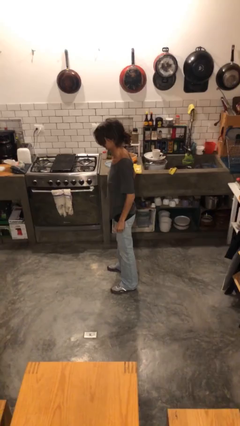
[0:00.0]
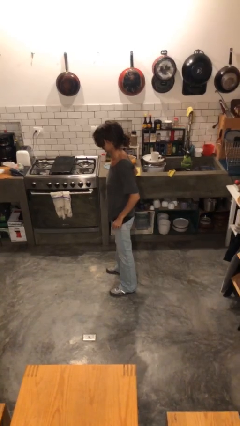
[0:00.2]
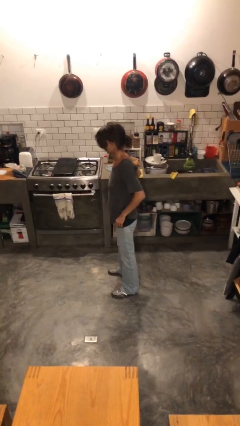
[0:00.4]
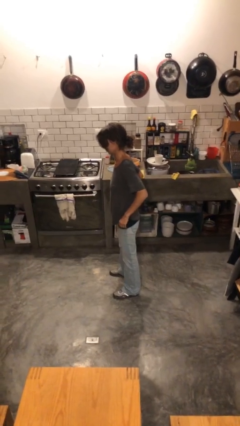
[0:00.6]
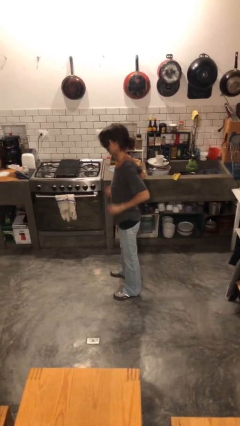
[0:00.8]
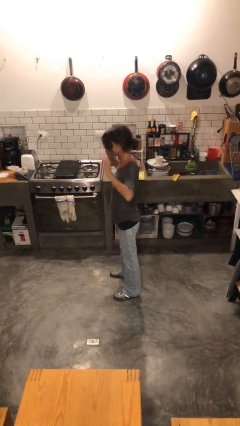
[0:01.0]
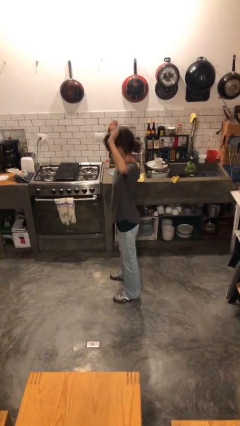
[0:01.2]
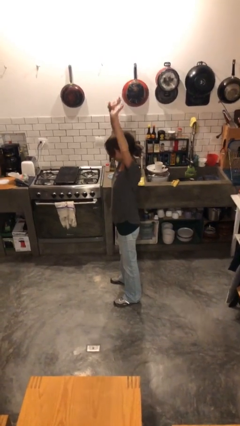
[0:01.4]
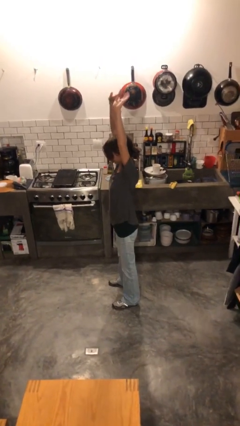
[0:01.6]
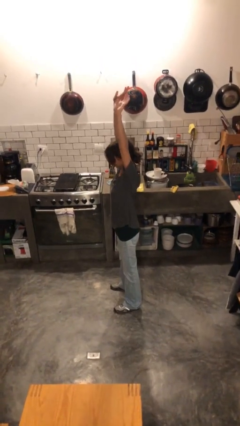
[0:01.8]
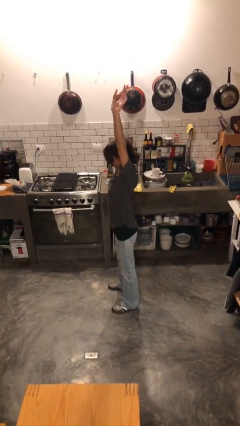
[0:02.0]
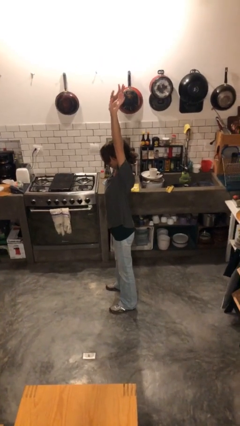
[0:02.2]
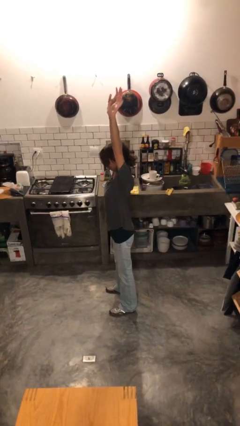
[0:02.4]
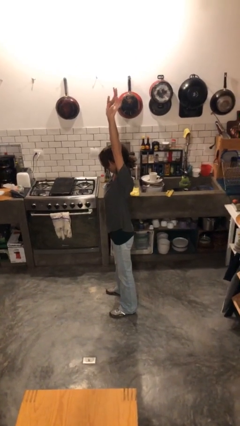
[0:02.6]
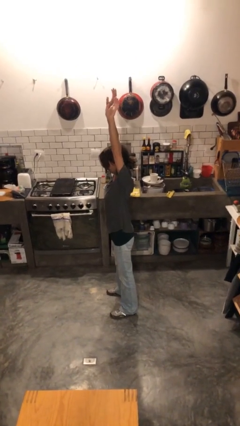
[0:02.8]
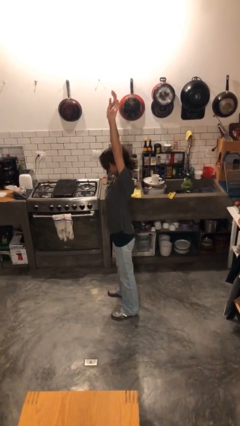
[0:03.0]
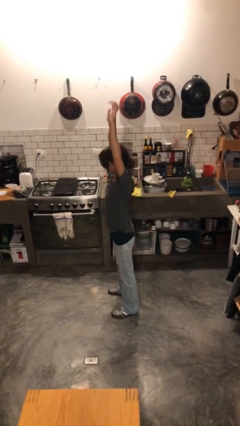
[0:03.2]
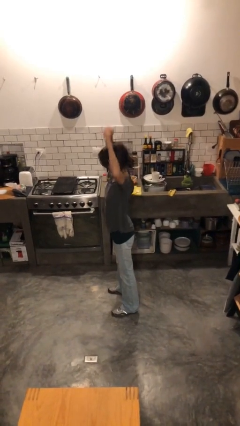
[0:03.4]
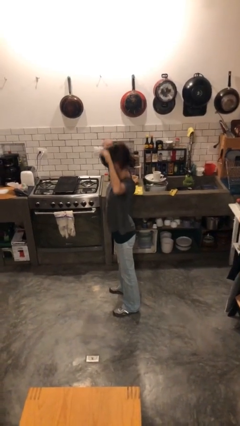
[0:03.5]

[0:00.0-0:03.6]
person stretches arms over head

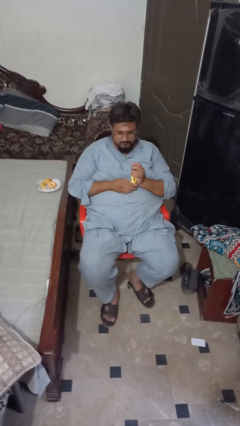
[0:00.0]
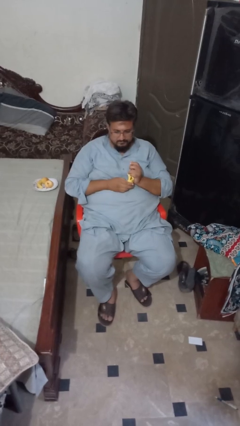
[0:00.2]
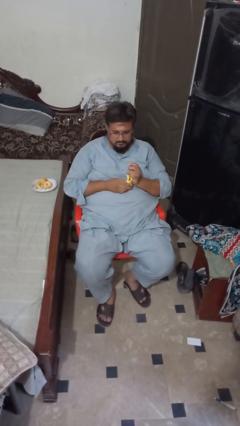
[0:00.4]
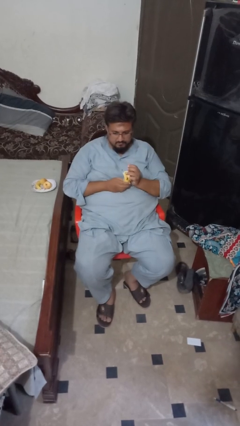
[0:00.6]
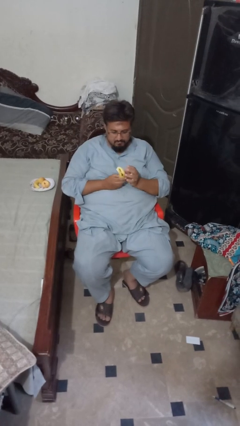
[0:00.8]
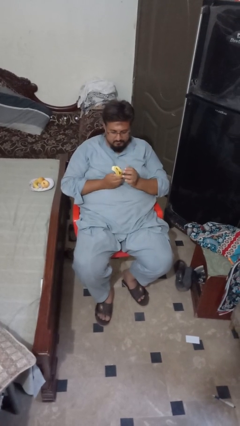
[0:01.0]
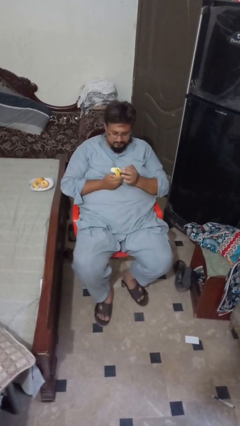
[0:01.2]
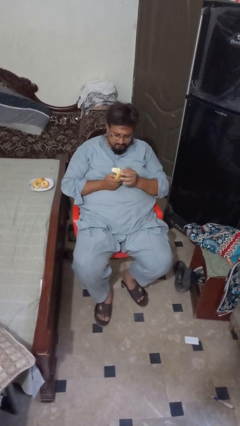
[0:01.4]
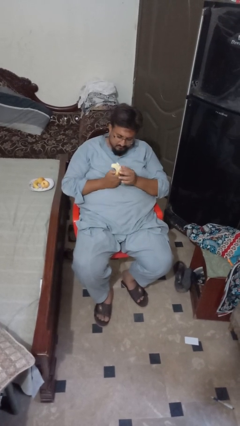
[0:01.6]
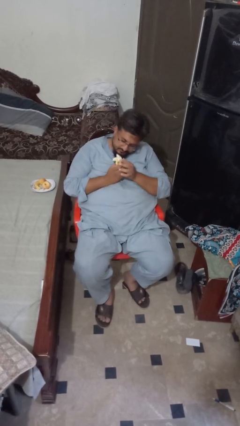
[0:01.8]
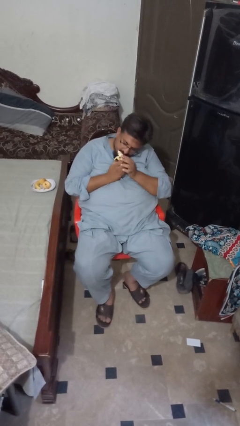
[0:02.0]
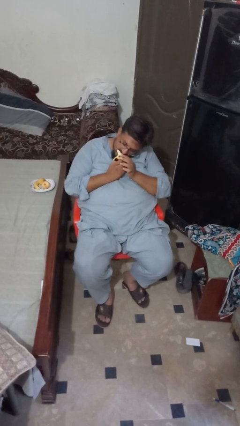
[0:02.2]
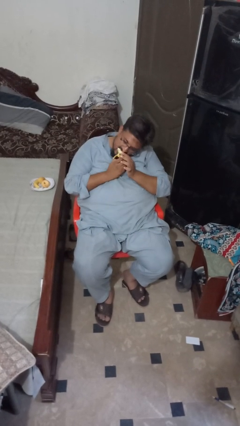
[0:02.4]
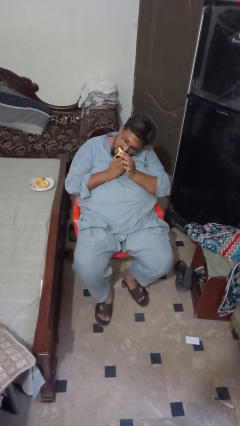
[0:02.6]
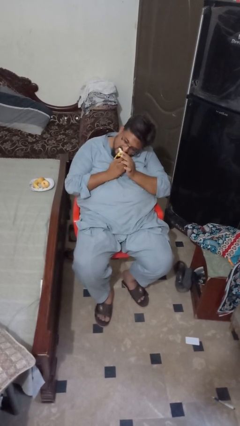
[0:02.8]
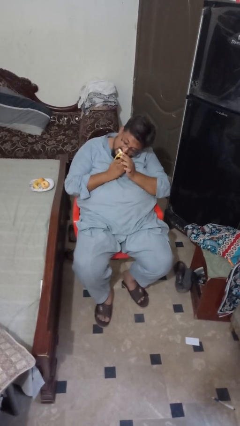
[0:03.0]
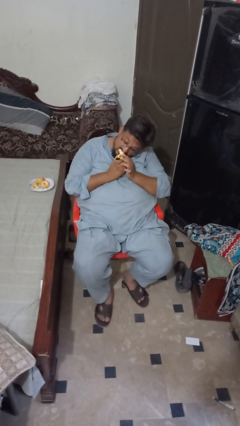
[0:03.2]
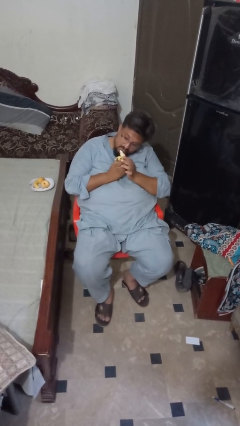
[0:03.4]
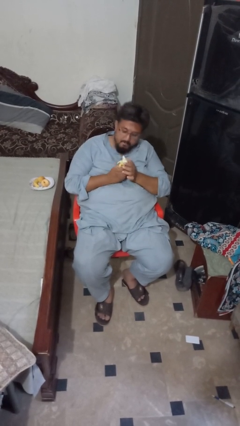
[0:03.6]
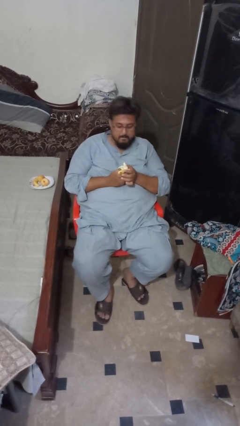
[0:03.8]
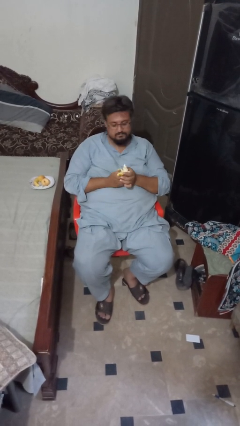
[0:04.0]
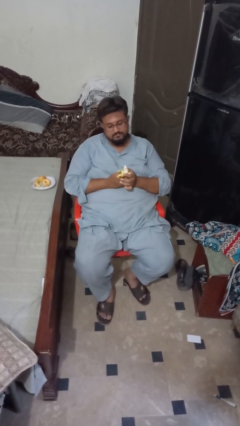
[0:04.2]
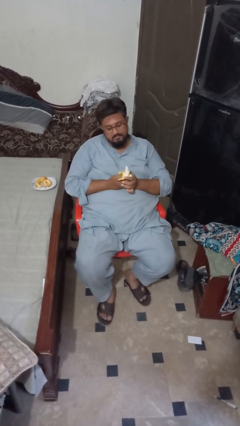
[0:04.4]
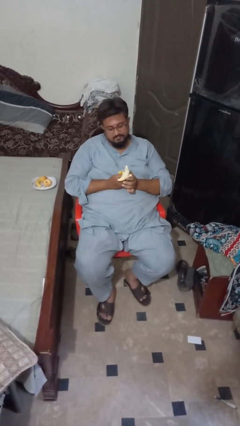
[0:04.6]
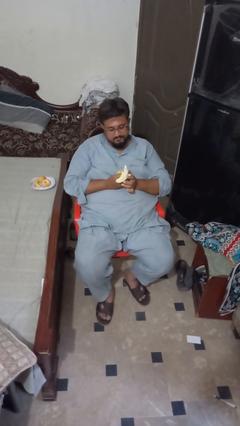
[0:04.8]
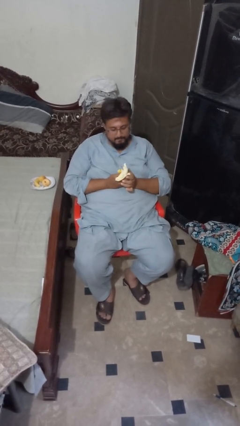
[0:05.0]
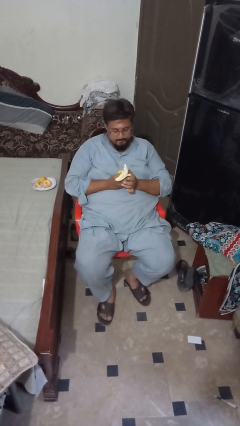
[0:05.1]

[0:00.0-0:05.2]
person eats banana

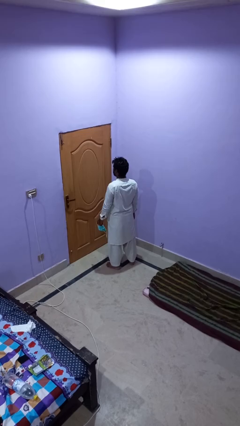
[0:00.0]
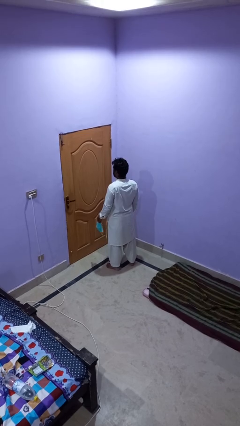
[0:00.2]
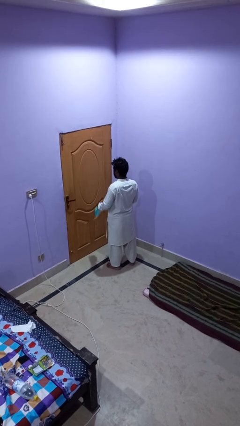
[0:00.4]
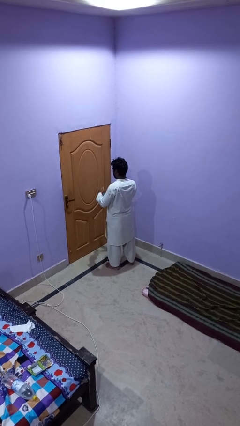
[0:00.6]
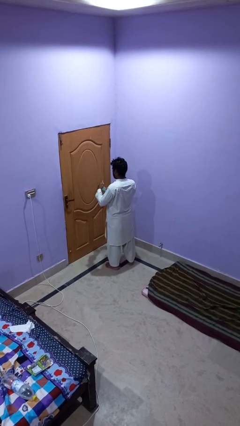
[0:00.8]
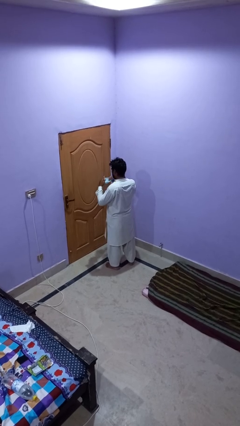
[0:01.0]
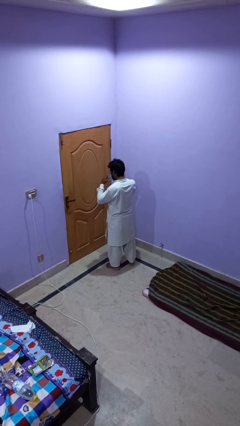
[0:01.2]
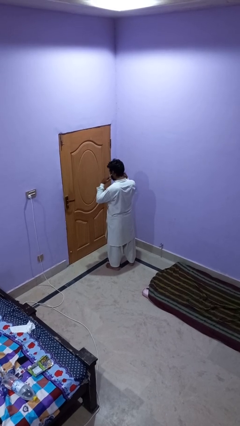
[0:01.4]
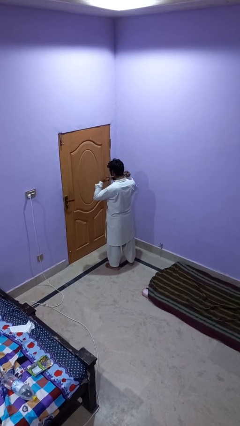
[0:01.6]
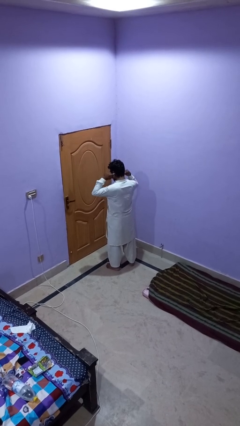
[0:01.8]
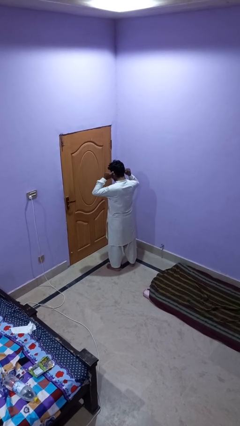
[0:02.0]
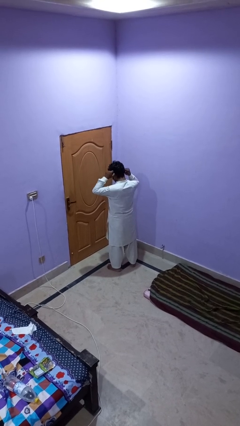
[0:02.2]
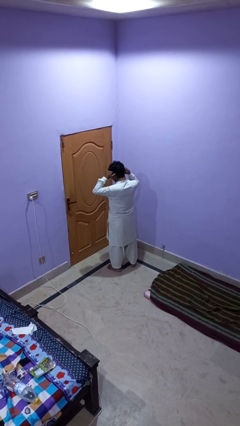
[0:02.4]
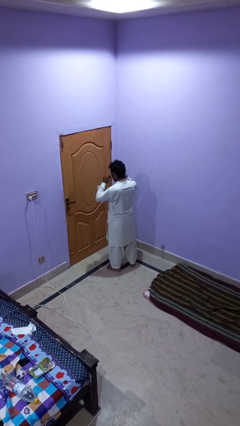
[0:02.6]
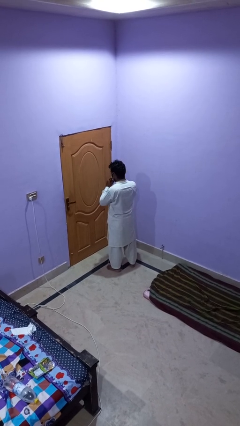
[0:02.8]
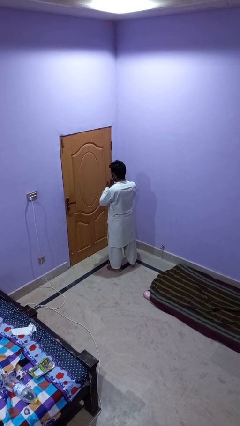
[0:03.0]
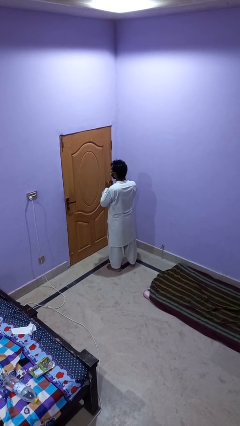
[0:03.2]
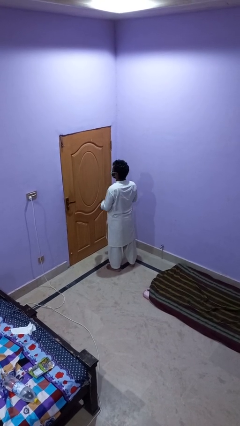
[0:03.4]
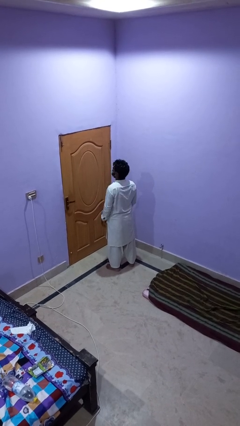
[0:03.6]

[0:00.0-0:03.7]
person puts on facemask

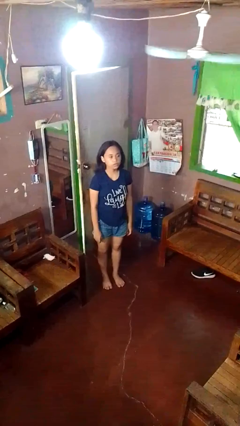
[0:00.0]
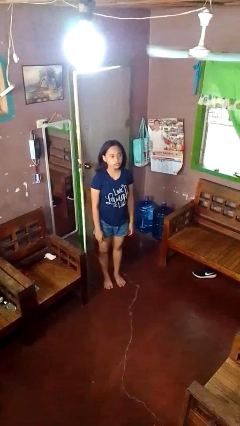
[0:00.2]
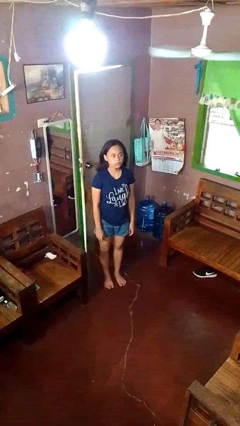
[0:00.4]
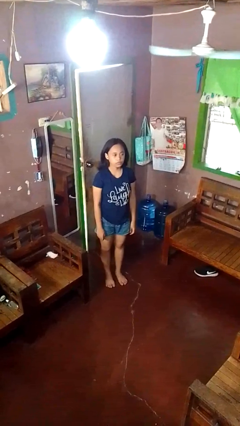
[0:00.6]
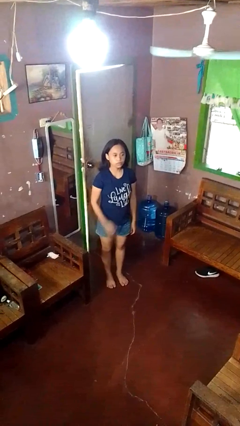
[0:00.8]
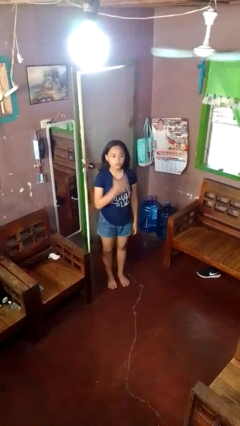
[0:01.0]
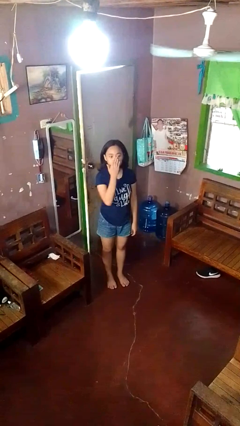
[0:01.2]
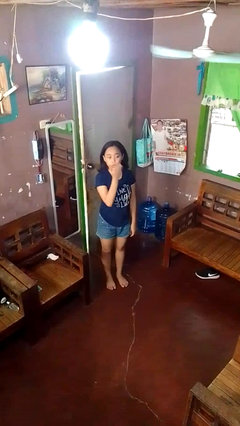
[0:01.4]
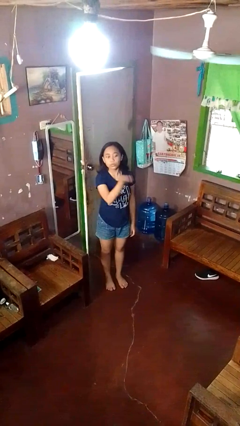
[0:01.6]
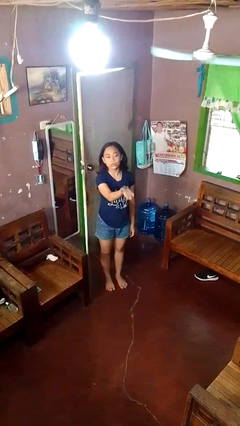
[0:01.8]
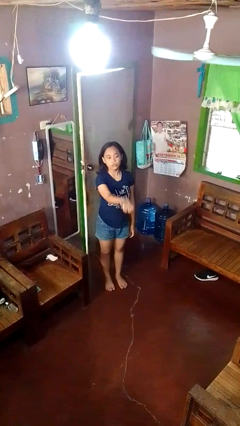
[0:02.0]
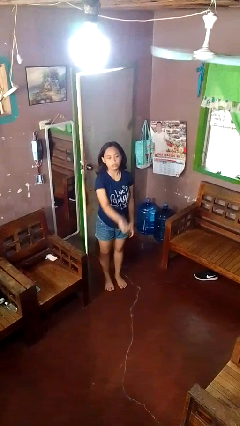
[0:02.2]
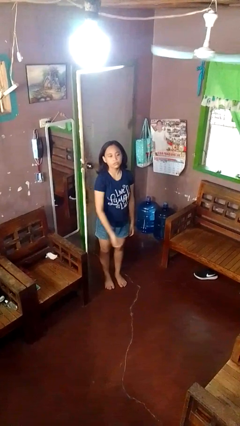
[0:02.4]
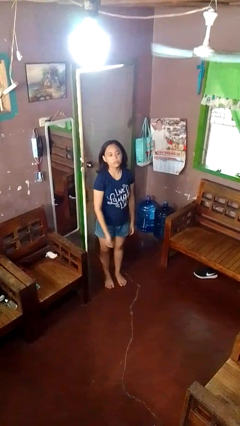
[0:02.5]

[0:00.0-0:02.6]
person gestures blow kiss

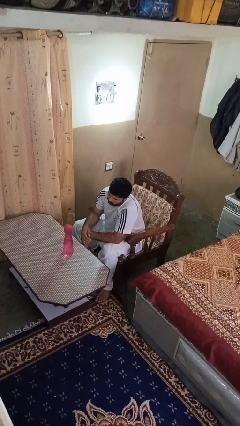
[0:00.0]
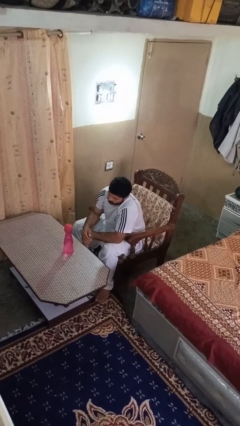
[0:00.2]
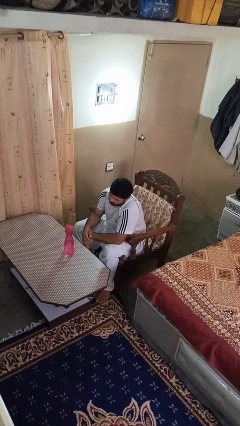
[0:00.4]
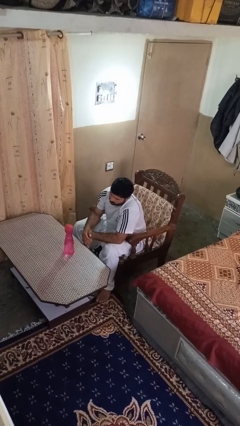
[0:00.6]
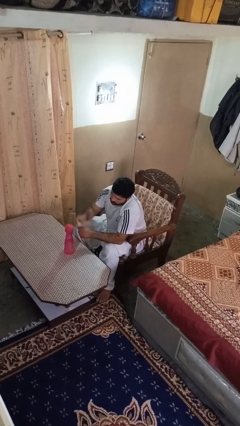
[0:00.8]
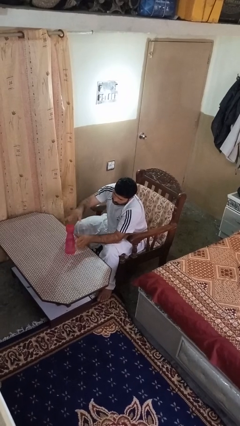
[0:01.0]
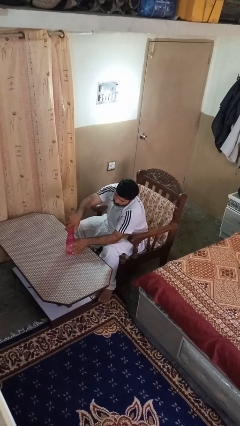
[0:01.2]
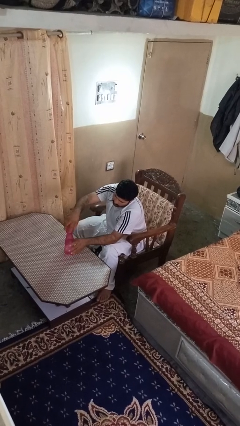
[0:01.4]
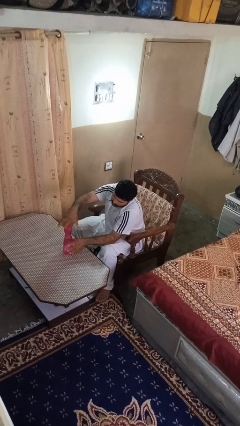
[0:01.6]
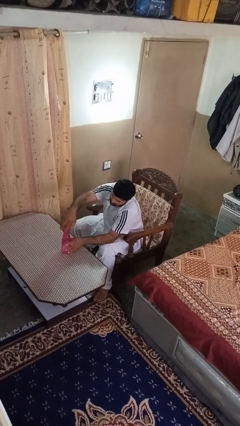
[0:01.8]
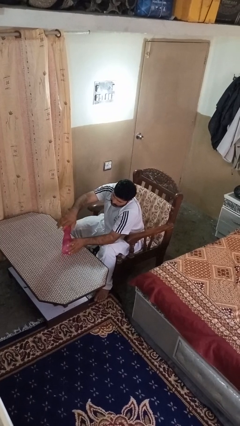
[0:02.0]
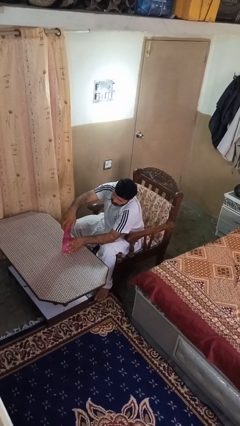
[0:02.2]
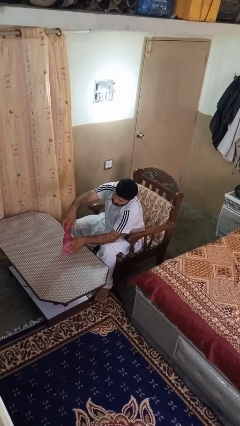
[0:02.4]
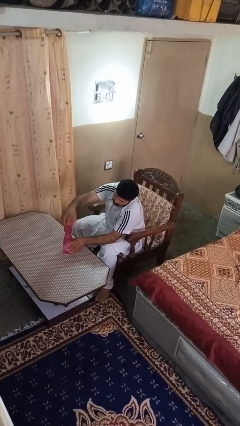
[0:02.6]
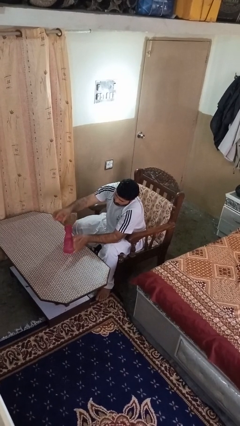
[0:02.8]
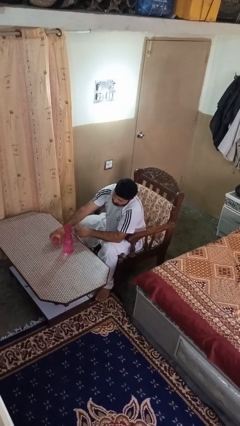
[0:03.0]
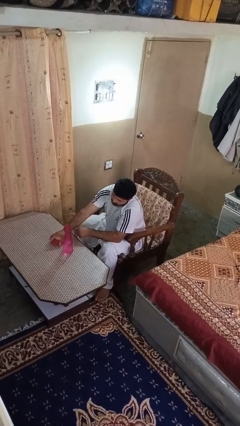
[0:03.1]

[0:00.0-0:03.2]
person unscrews lid from bottle
